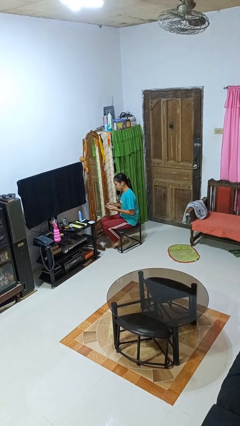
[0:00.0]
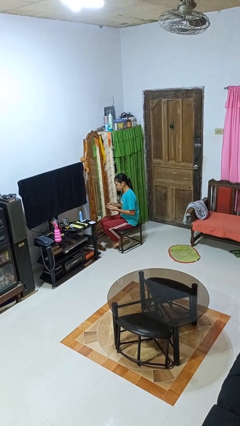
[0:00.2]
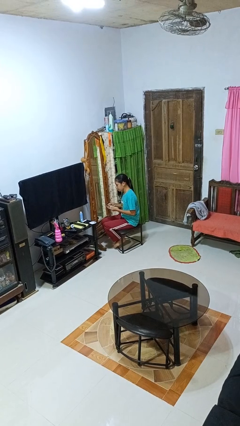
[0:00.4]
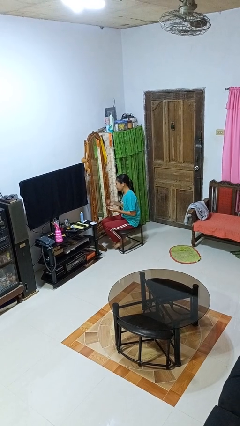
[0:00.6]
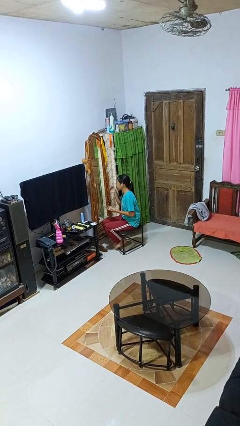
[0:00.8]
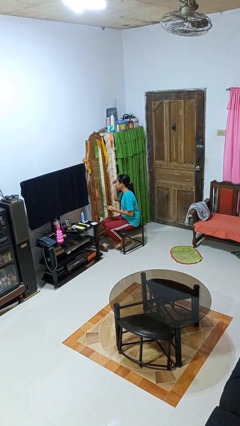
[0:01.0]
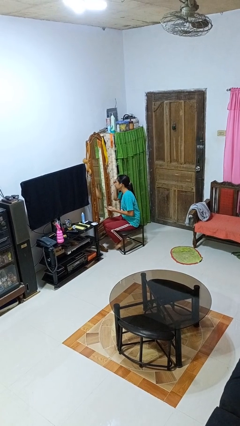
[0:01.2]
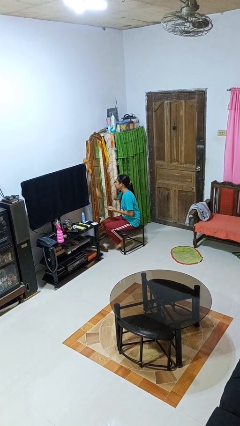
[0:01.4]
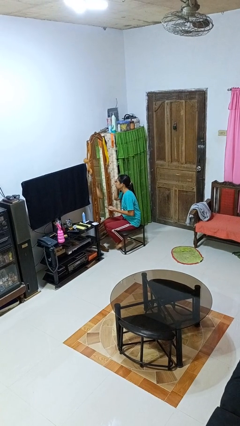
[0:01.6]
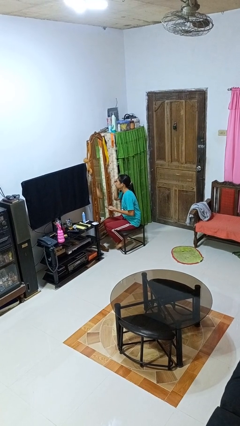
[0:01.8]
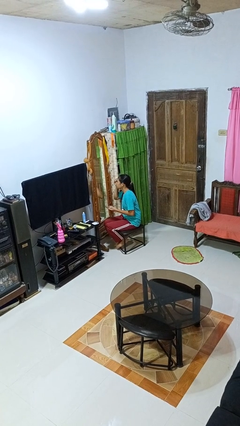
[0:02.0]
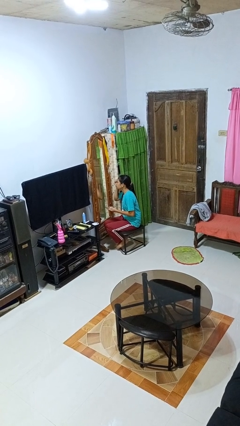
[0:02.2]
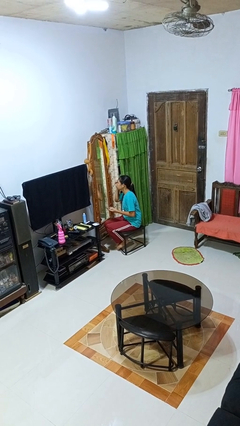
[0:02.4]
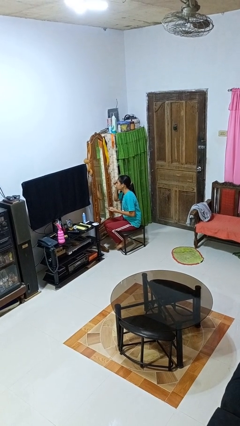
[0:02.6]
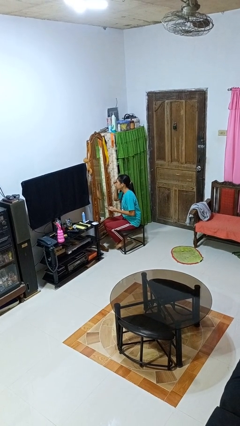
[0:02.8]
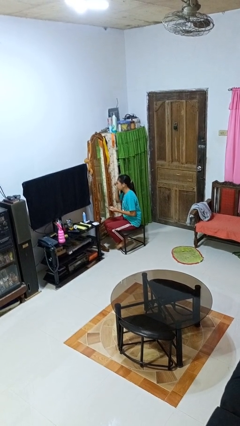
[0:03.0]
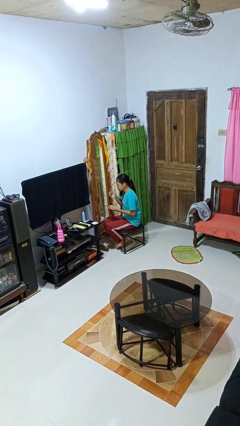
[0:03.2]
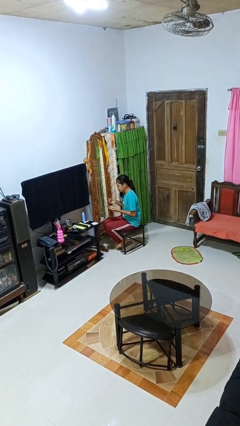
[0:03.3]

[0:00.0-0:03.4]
person applies eye makeup

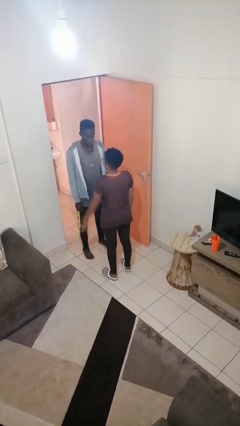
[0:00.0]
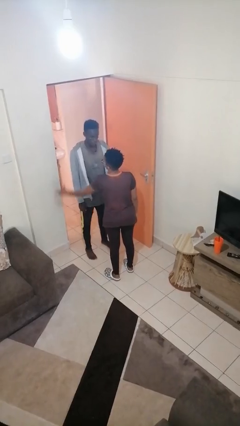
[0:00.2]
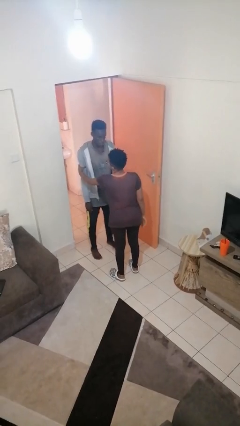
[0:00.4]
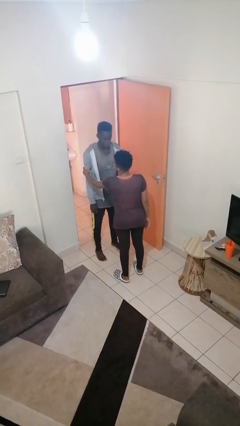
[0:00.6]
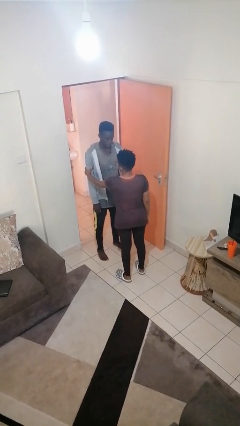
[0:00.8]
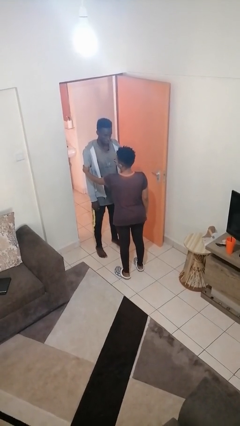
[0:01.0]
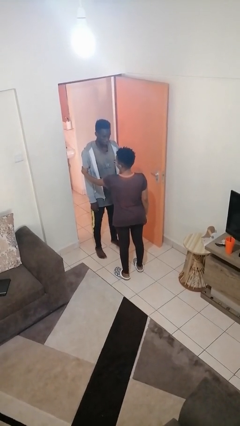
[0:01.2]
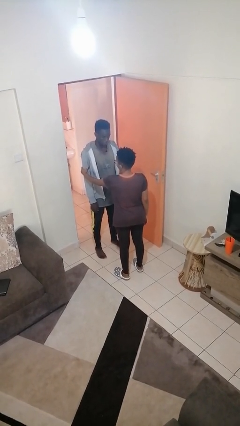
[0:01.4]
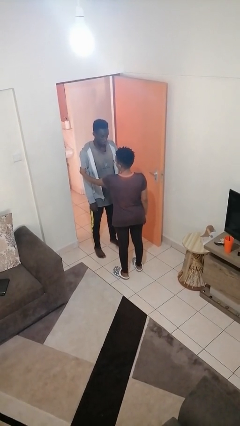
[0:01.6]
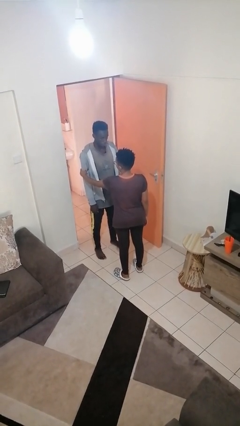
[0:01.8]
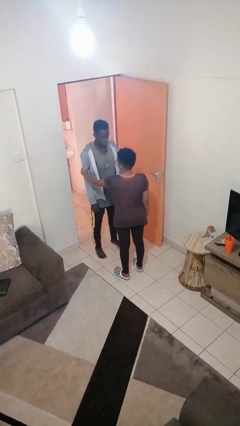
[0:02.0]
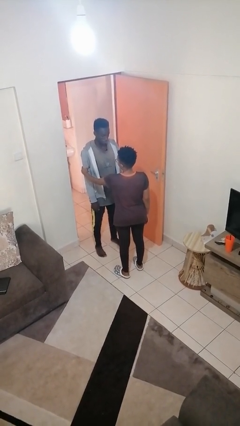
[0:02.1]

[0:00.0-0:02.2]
person grabs person by bicep

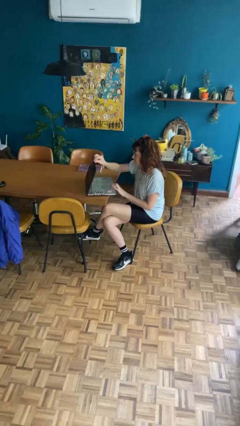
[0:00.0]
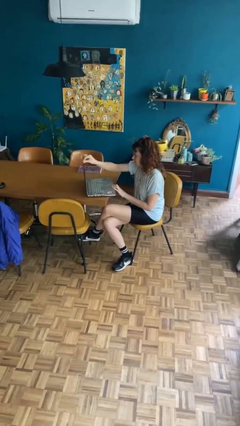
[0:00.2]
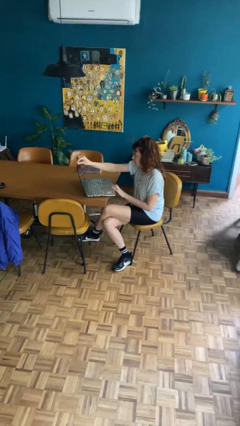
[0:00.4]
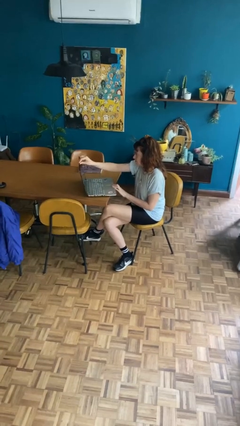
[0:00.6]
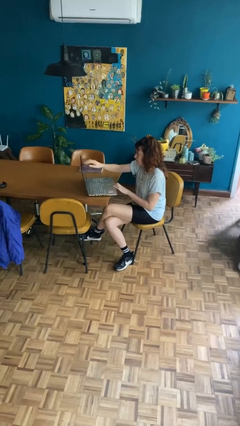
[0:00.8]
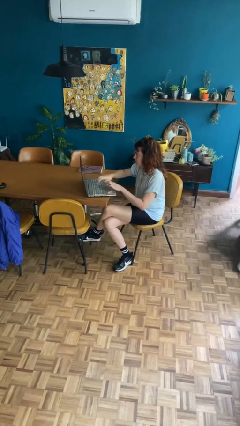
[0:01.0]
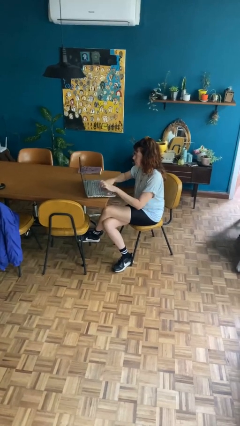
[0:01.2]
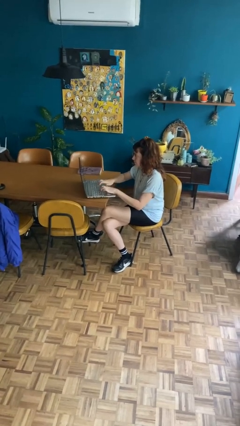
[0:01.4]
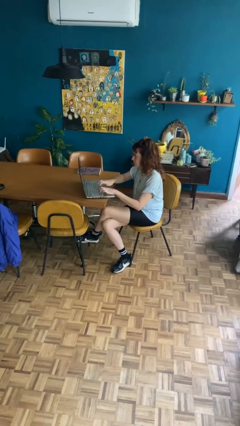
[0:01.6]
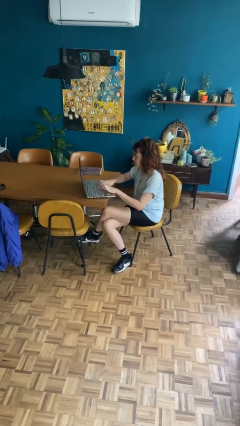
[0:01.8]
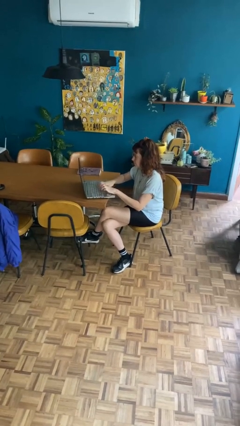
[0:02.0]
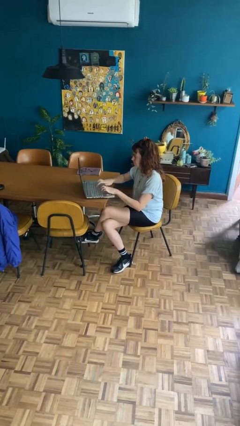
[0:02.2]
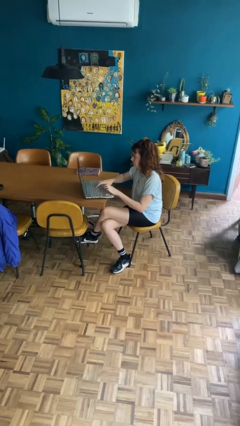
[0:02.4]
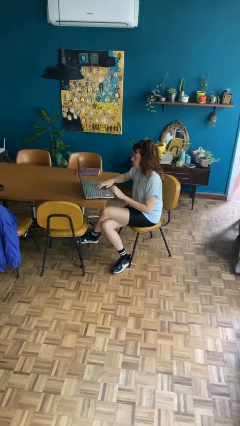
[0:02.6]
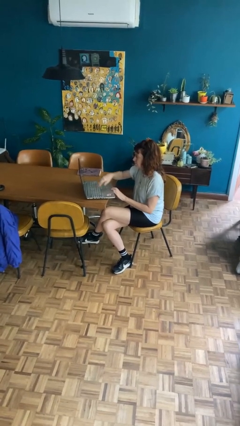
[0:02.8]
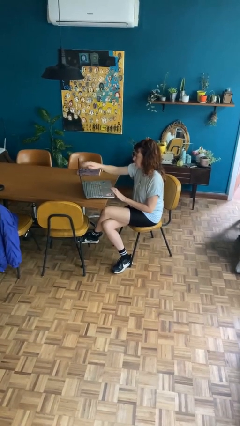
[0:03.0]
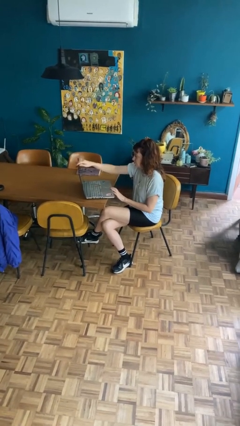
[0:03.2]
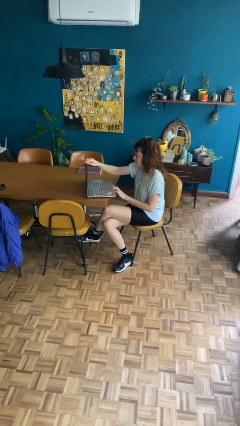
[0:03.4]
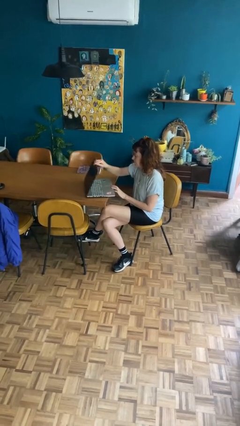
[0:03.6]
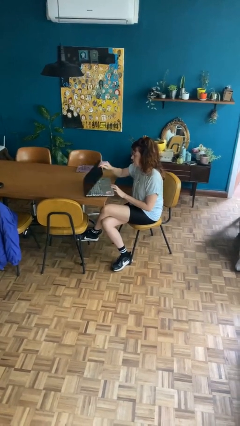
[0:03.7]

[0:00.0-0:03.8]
person interacts with laptop

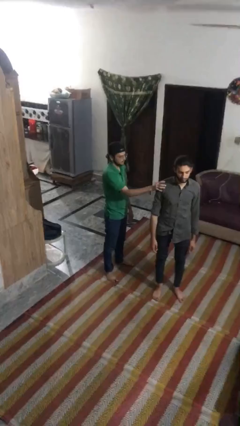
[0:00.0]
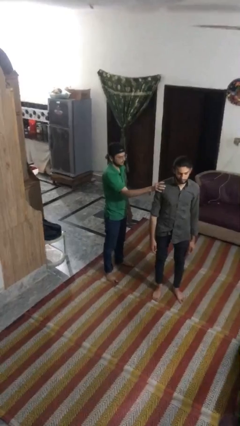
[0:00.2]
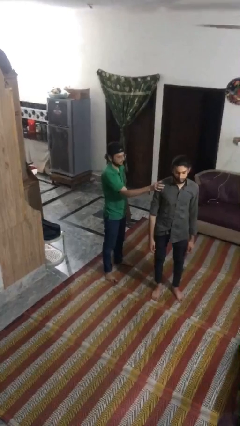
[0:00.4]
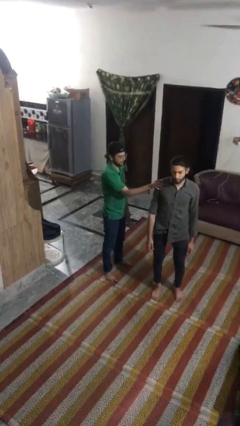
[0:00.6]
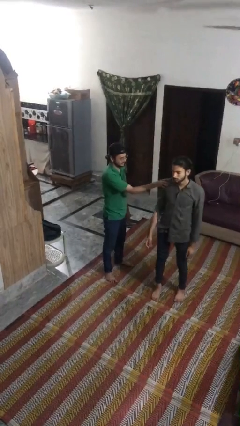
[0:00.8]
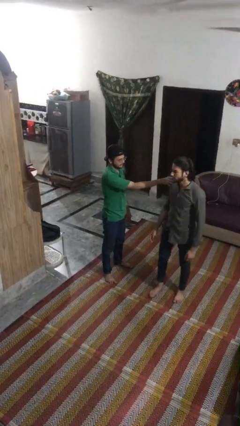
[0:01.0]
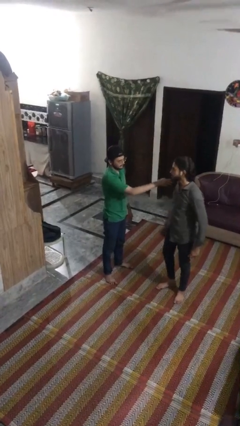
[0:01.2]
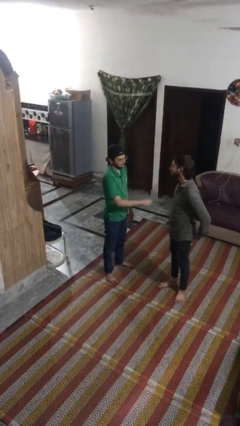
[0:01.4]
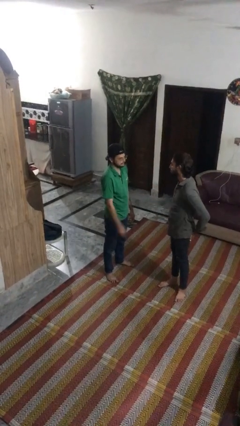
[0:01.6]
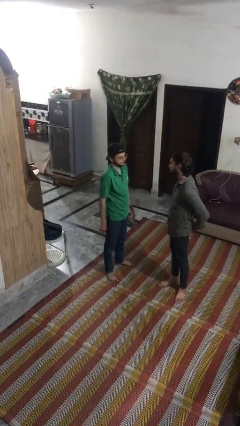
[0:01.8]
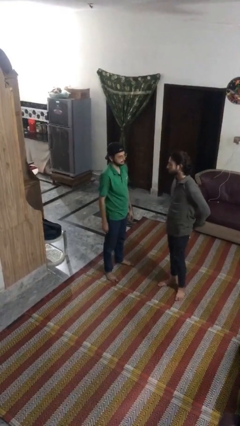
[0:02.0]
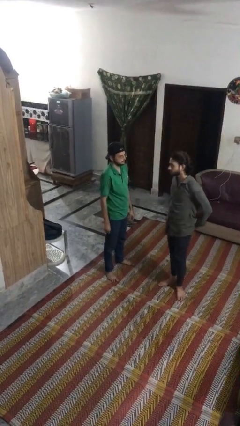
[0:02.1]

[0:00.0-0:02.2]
person spins person around

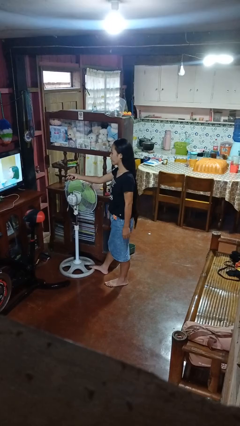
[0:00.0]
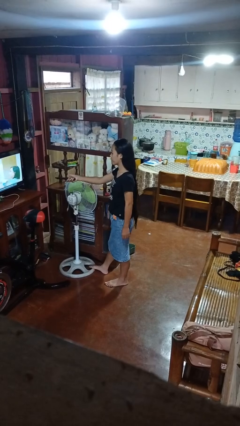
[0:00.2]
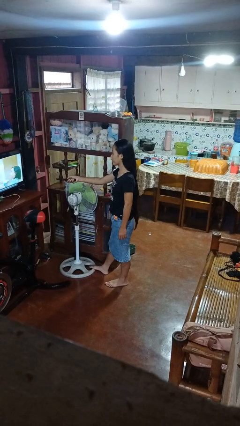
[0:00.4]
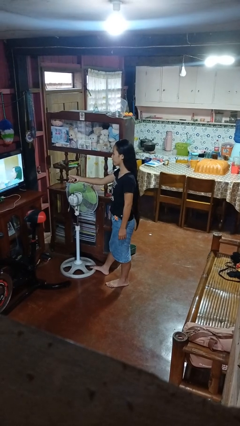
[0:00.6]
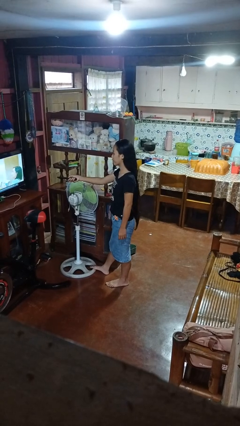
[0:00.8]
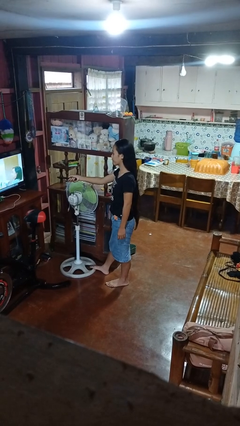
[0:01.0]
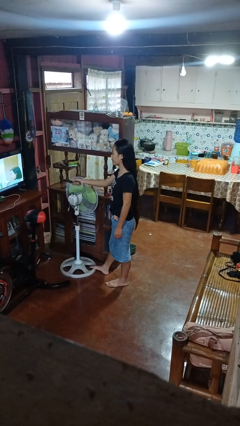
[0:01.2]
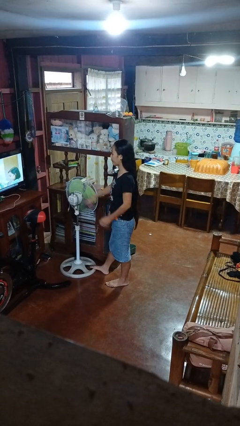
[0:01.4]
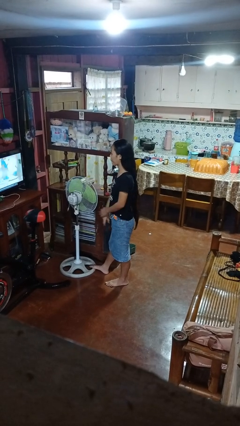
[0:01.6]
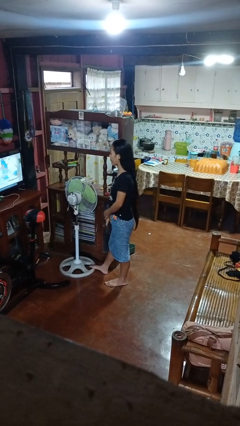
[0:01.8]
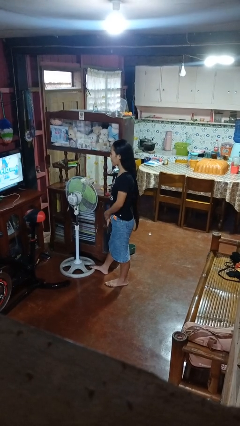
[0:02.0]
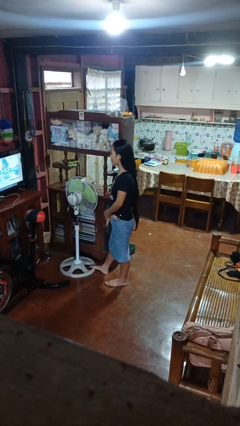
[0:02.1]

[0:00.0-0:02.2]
person uses television remote

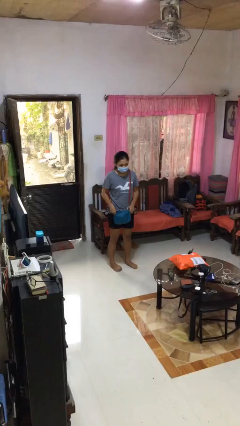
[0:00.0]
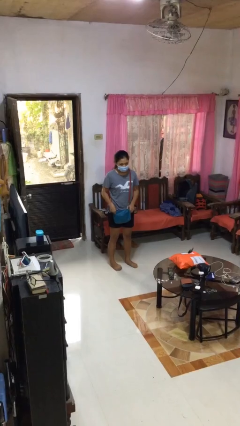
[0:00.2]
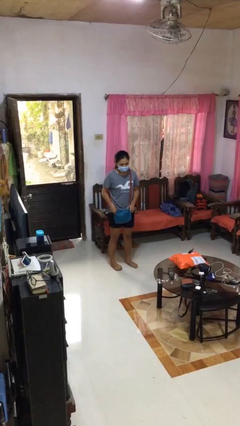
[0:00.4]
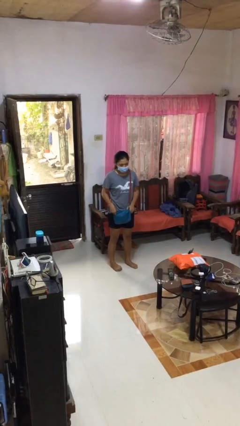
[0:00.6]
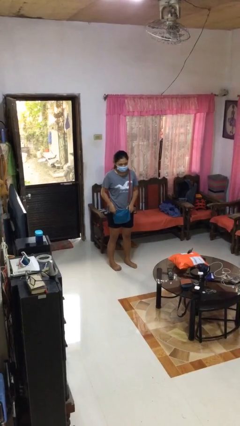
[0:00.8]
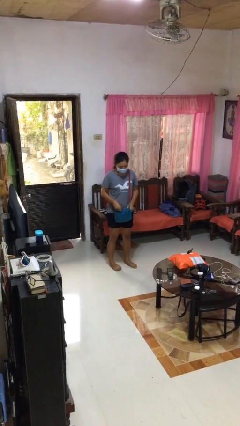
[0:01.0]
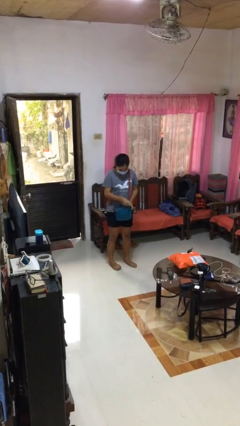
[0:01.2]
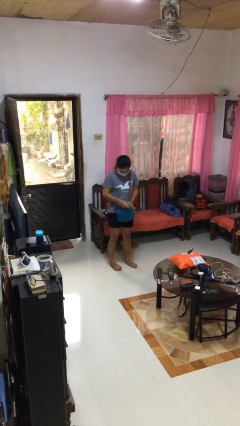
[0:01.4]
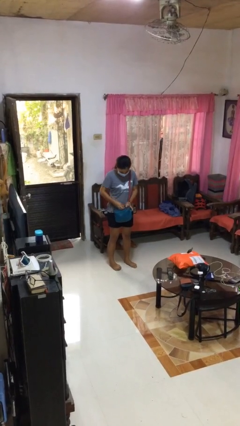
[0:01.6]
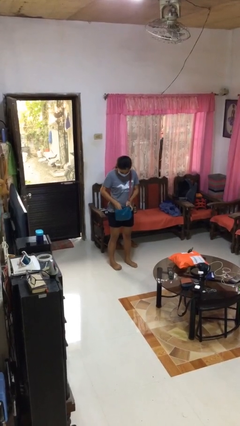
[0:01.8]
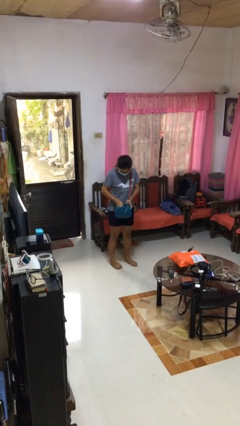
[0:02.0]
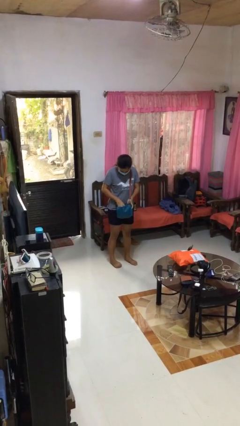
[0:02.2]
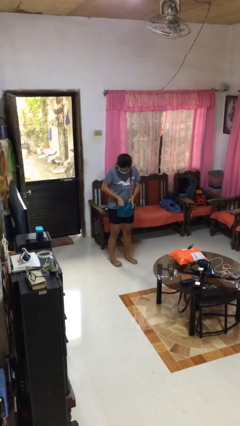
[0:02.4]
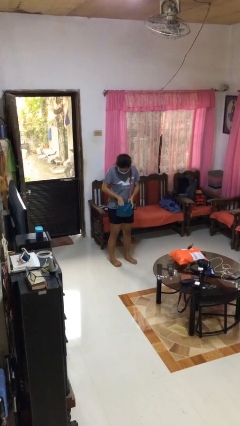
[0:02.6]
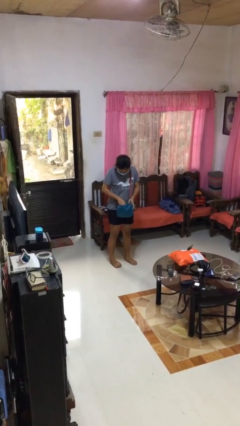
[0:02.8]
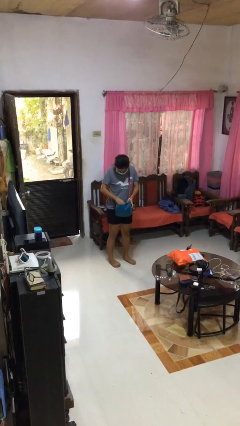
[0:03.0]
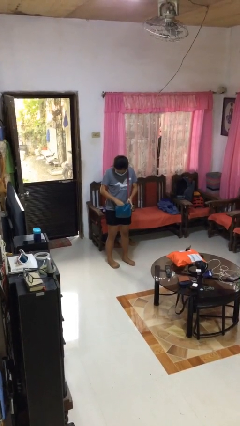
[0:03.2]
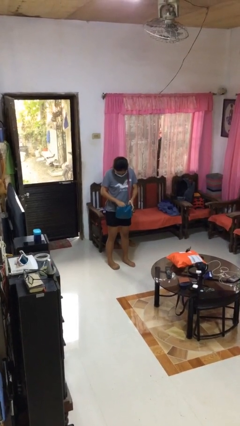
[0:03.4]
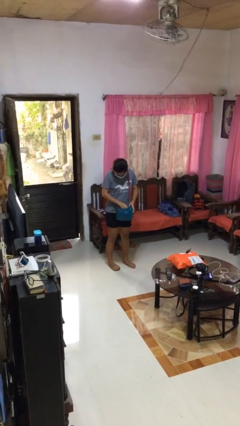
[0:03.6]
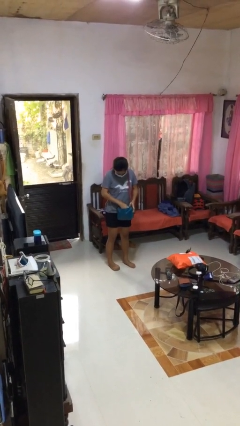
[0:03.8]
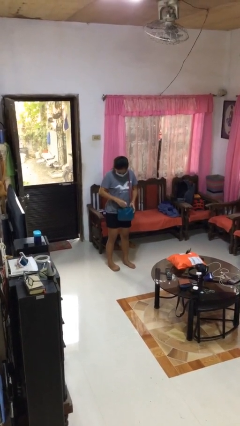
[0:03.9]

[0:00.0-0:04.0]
person searches in purse
